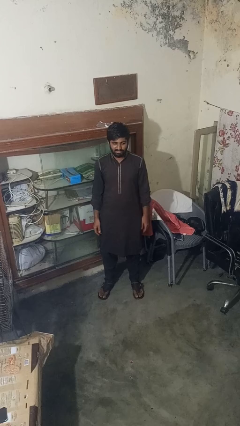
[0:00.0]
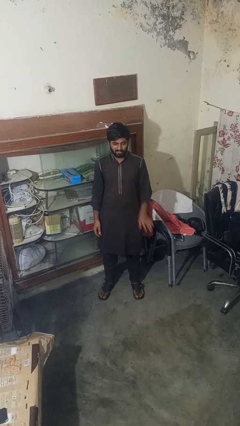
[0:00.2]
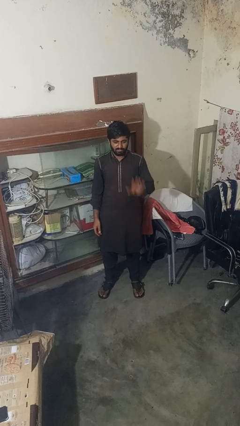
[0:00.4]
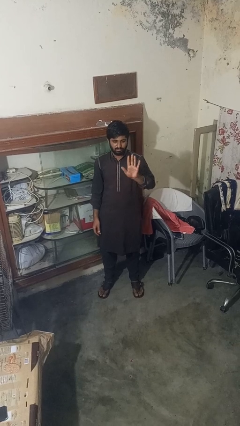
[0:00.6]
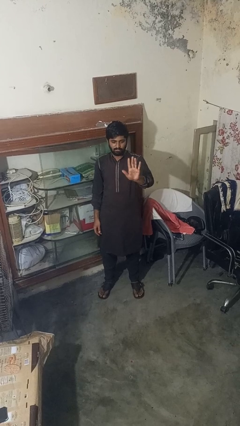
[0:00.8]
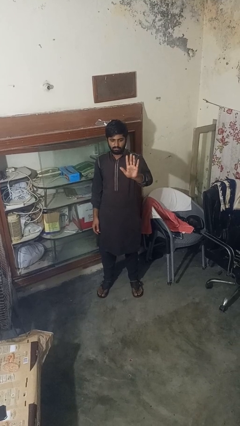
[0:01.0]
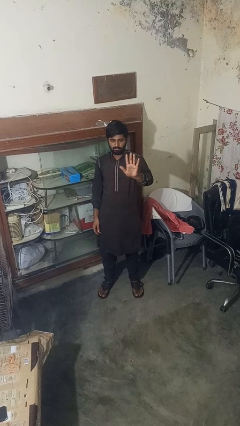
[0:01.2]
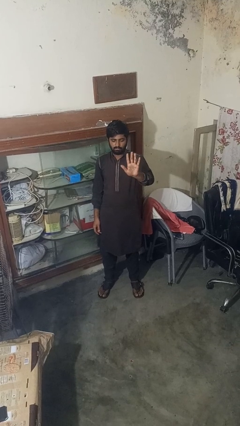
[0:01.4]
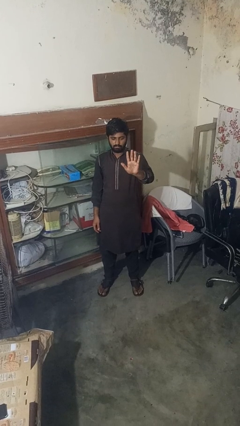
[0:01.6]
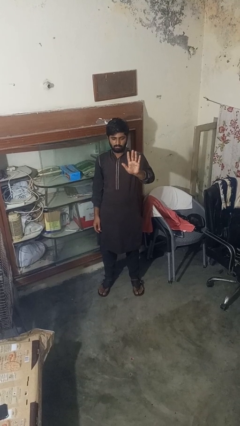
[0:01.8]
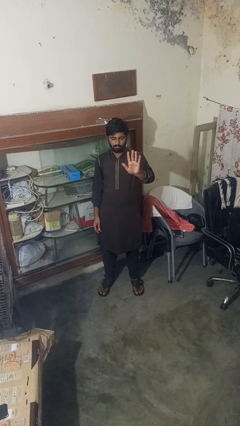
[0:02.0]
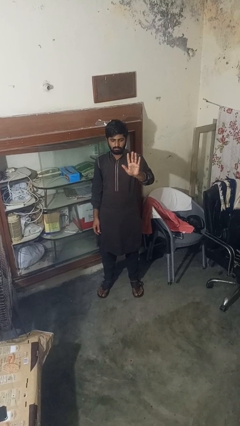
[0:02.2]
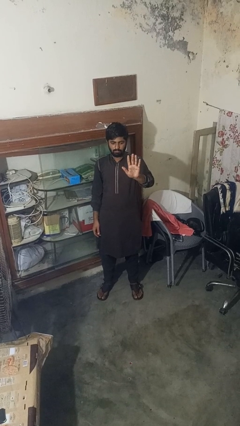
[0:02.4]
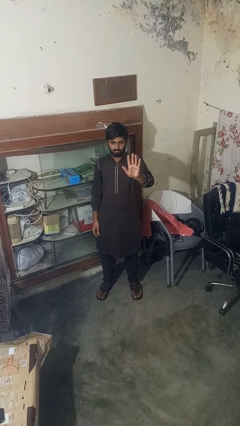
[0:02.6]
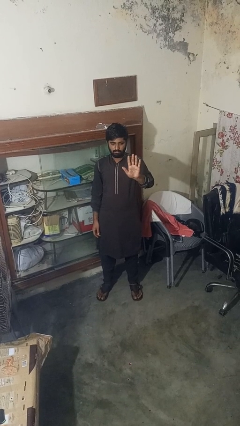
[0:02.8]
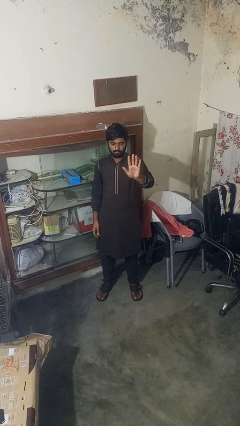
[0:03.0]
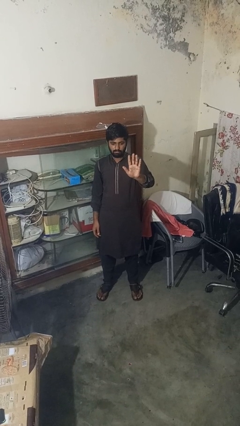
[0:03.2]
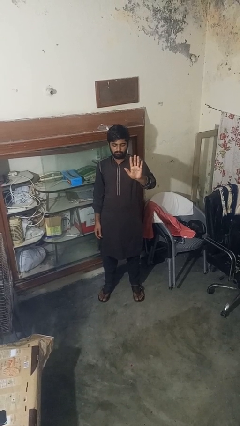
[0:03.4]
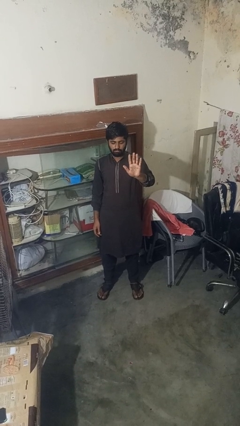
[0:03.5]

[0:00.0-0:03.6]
person gestures number five

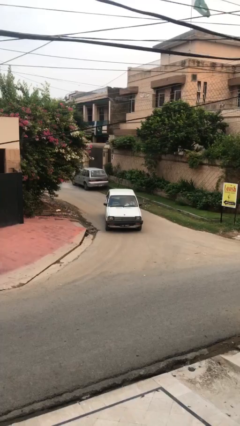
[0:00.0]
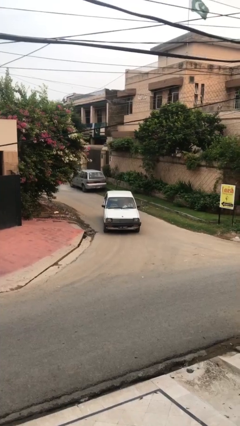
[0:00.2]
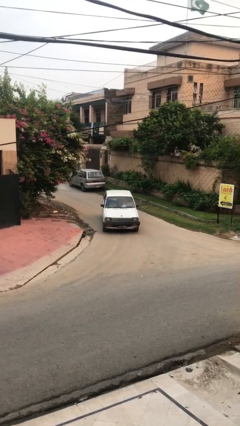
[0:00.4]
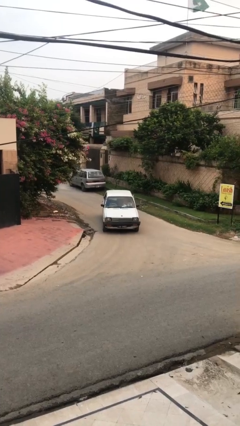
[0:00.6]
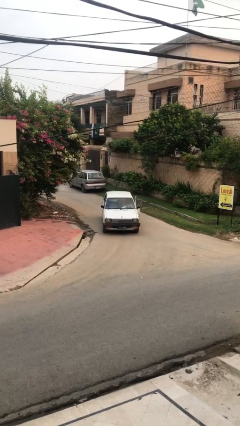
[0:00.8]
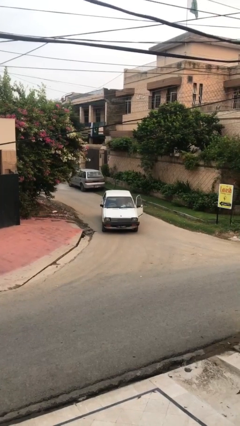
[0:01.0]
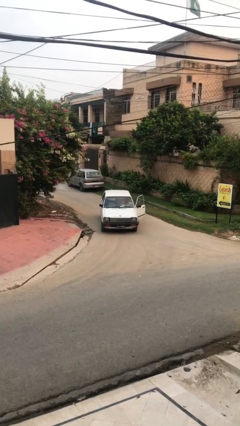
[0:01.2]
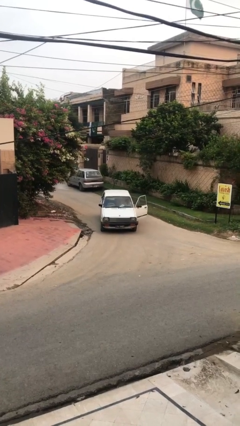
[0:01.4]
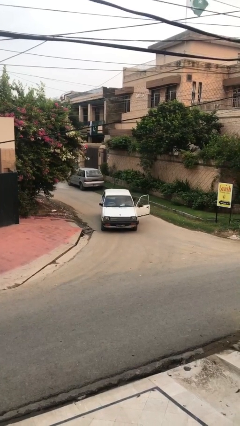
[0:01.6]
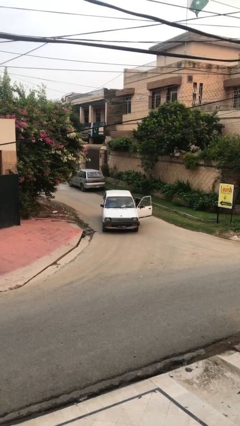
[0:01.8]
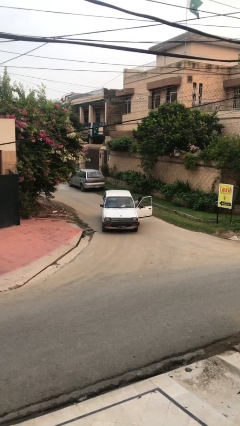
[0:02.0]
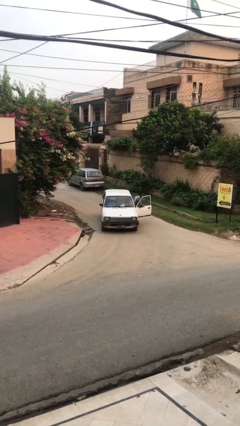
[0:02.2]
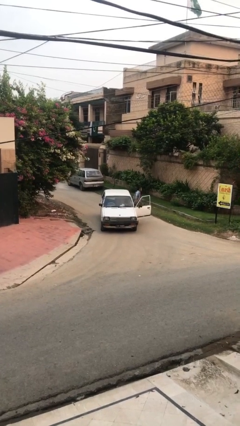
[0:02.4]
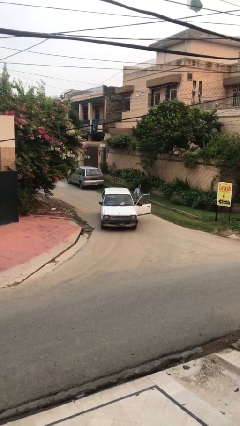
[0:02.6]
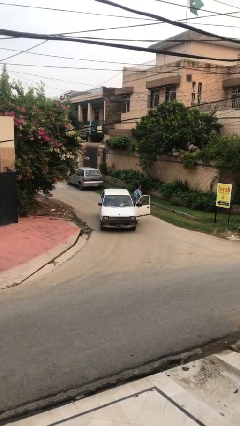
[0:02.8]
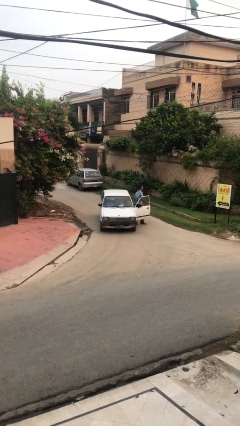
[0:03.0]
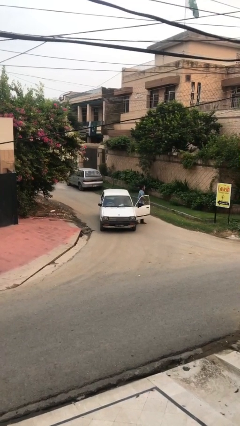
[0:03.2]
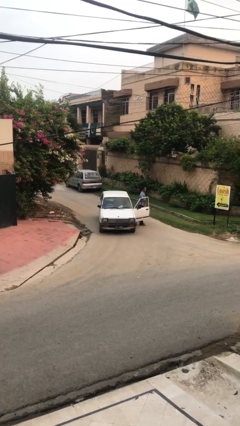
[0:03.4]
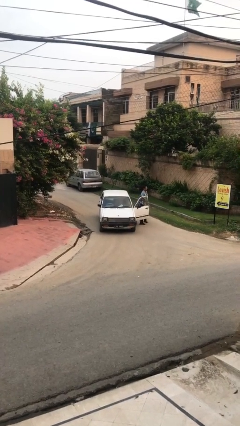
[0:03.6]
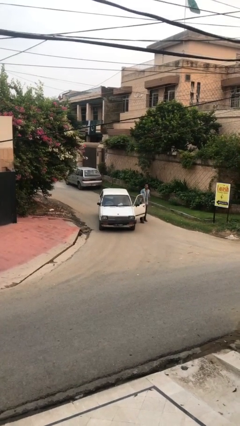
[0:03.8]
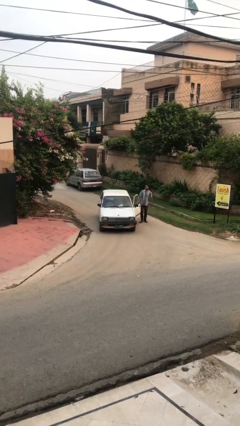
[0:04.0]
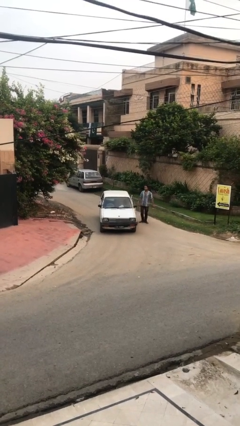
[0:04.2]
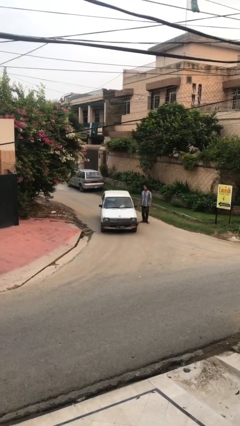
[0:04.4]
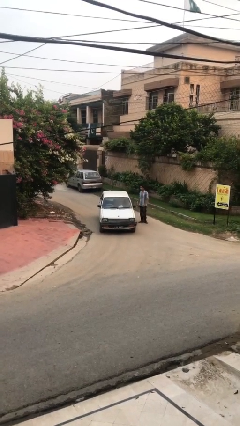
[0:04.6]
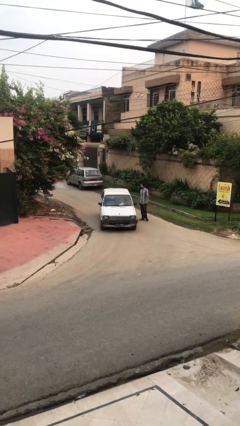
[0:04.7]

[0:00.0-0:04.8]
car drops off person

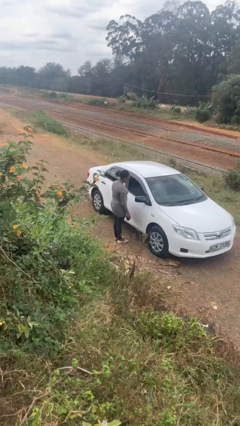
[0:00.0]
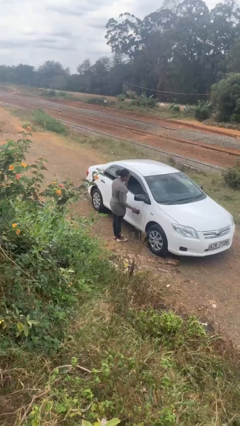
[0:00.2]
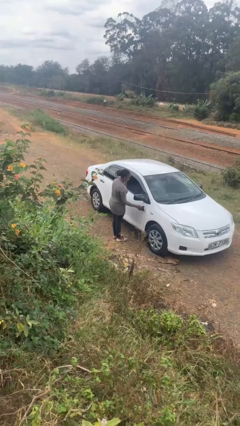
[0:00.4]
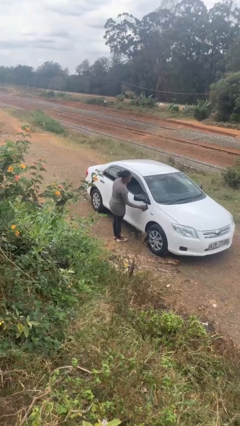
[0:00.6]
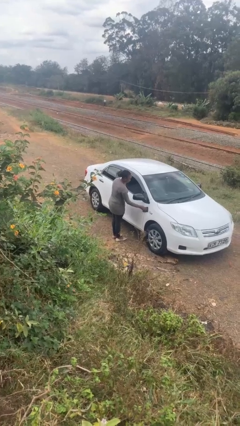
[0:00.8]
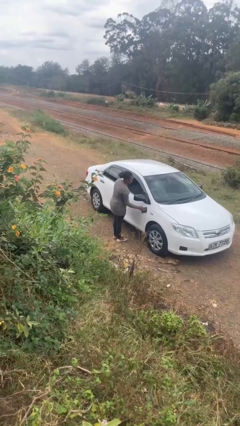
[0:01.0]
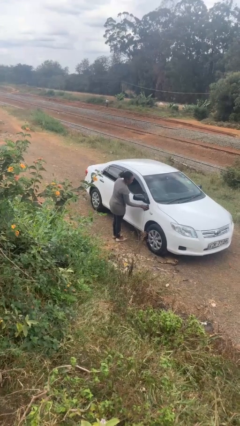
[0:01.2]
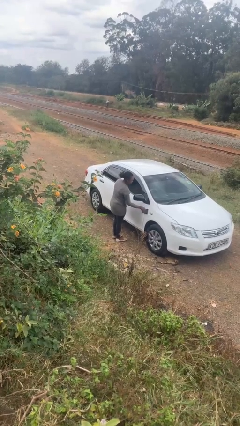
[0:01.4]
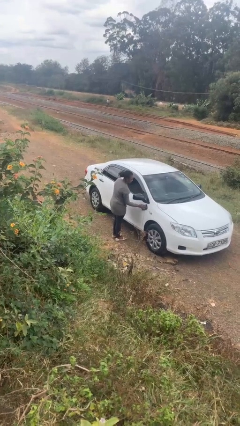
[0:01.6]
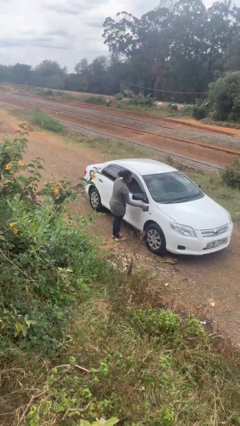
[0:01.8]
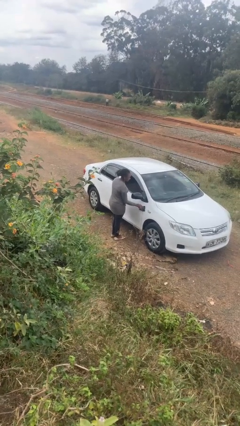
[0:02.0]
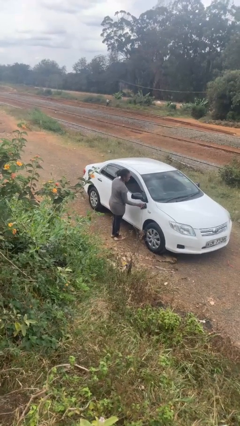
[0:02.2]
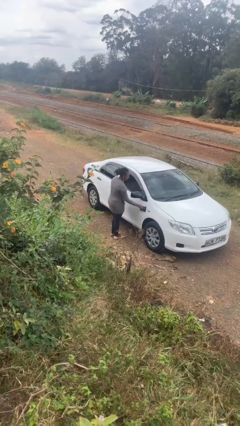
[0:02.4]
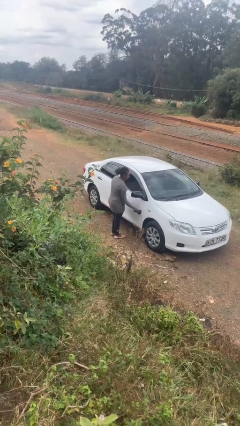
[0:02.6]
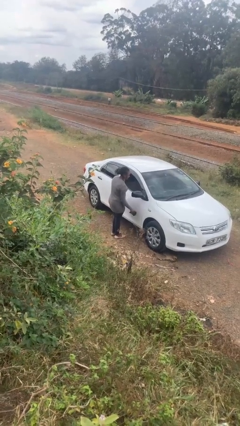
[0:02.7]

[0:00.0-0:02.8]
person polishes car with rag

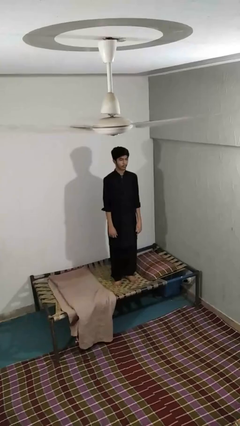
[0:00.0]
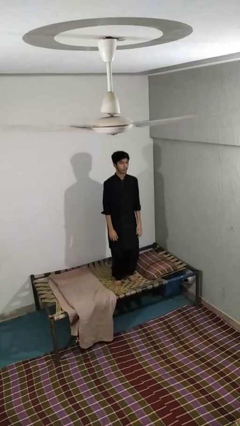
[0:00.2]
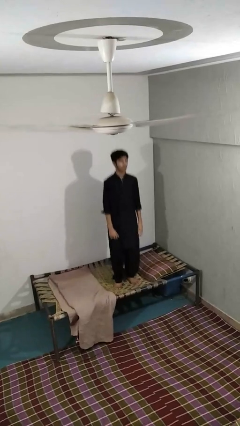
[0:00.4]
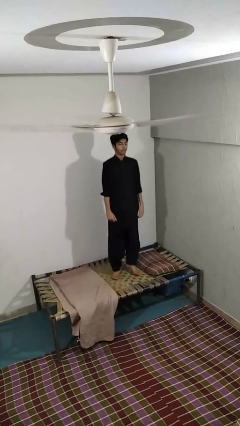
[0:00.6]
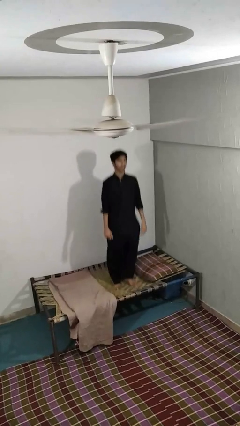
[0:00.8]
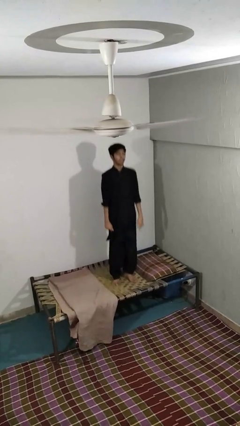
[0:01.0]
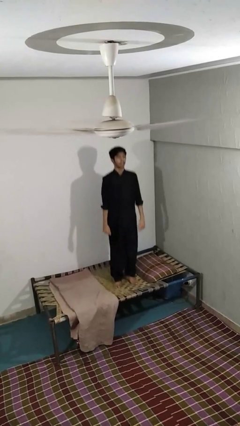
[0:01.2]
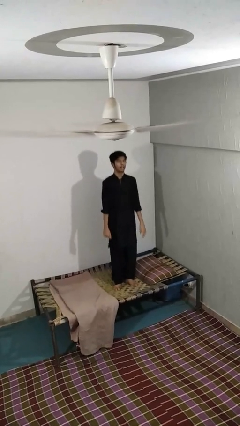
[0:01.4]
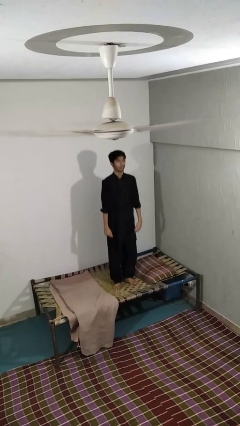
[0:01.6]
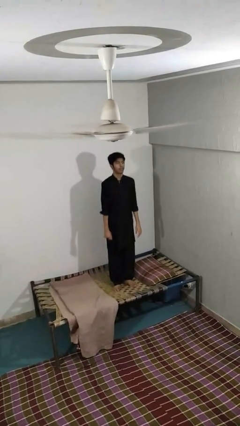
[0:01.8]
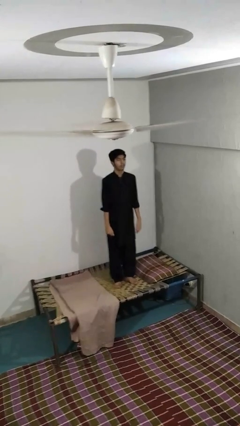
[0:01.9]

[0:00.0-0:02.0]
person jumps on bed

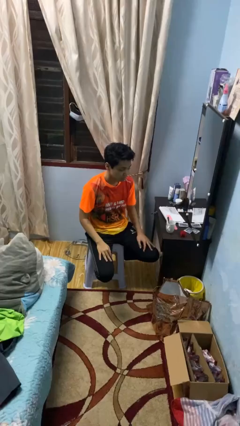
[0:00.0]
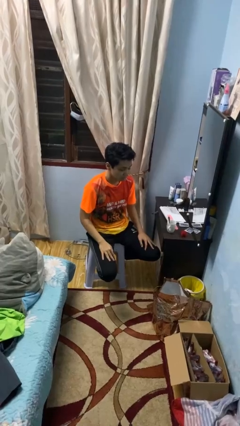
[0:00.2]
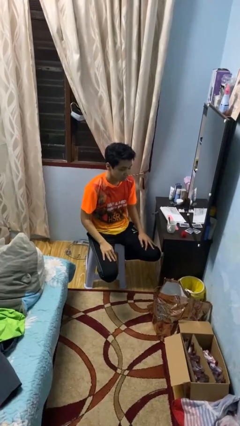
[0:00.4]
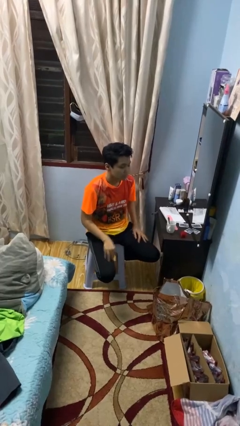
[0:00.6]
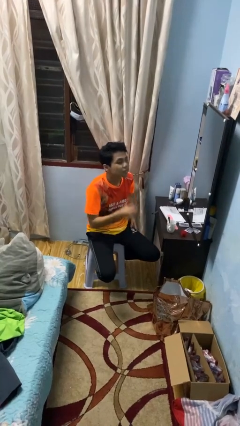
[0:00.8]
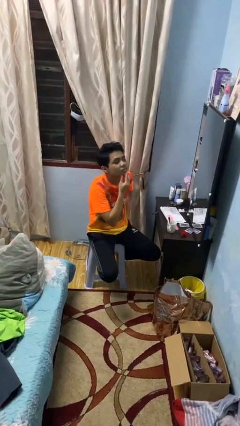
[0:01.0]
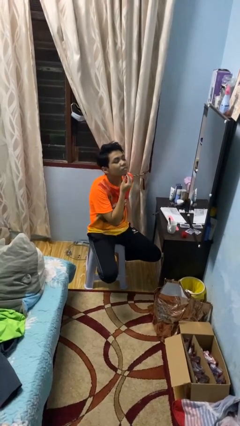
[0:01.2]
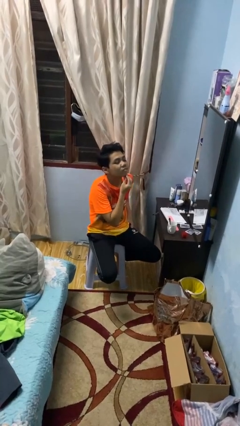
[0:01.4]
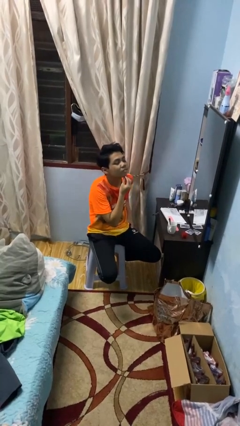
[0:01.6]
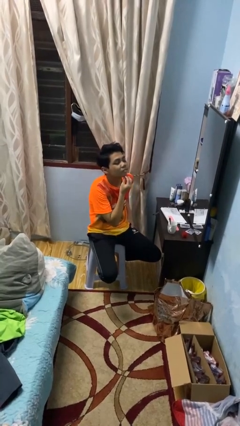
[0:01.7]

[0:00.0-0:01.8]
person strokes chin

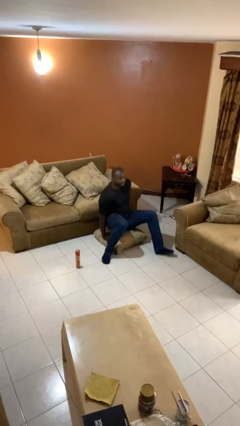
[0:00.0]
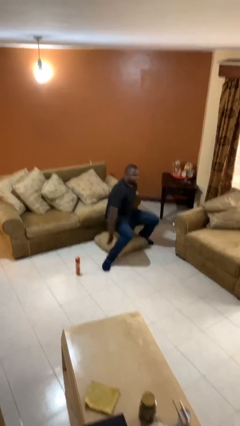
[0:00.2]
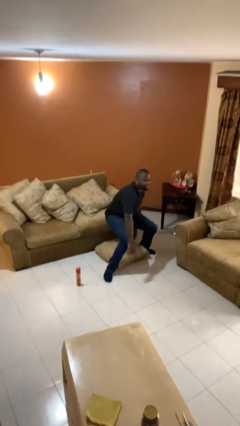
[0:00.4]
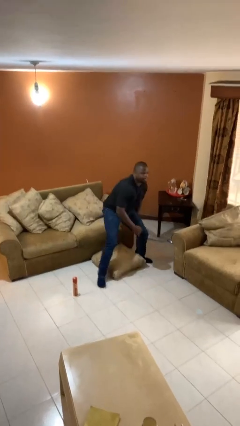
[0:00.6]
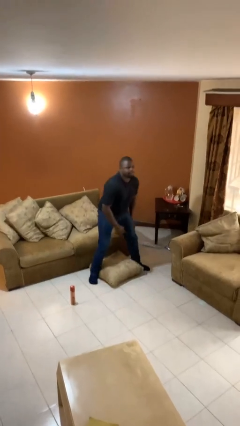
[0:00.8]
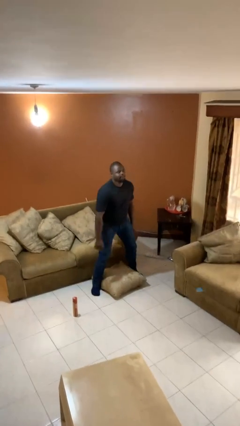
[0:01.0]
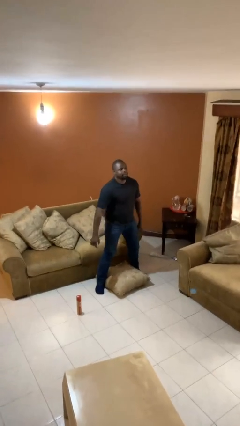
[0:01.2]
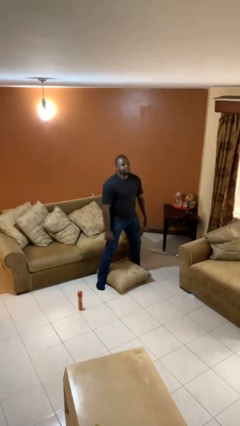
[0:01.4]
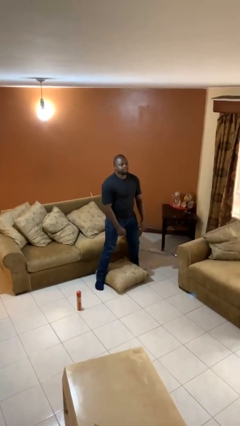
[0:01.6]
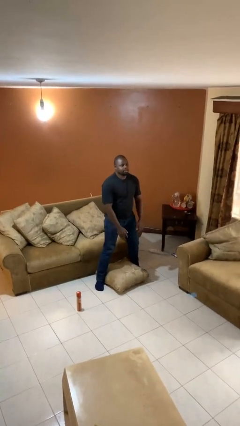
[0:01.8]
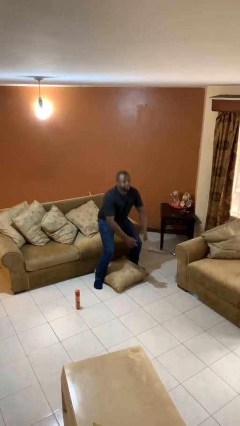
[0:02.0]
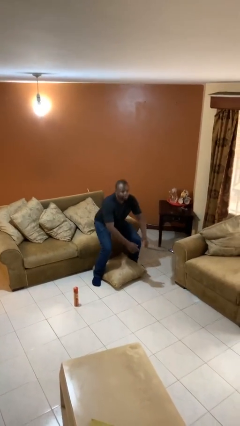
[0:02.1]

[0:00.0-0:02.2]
person stands up from floor
